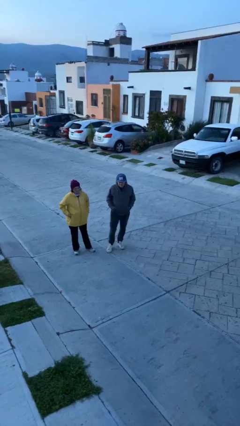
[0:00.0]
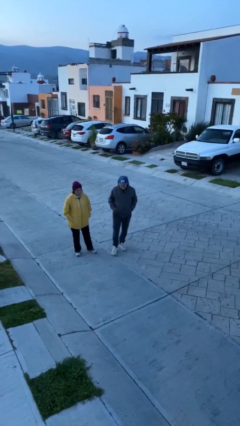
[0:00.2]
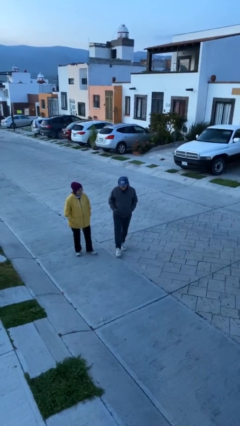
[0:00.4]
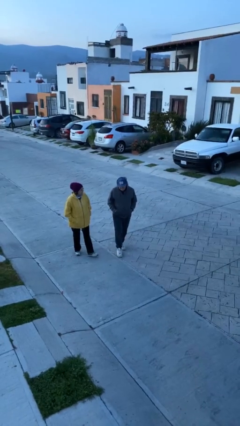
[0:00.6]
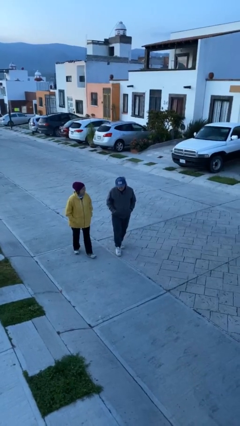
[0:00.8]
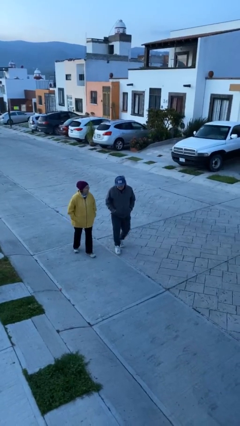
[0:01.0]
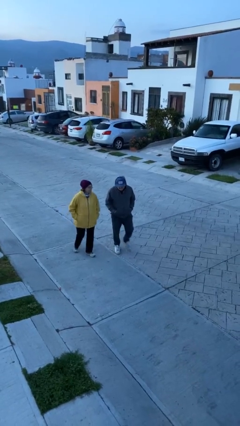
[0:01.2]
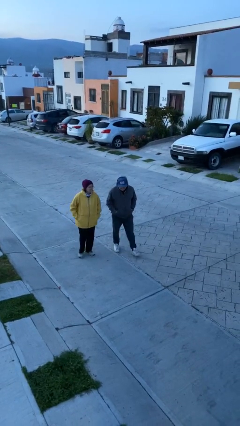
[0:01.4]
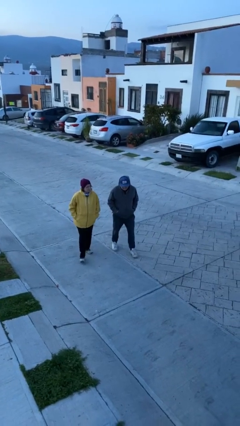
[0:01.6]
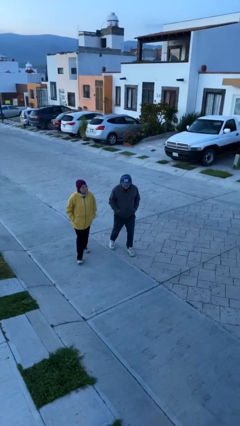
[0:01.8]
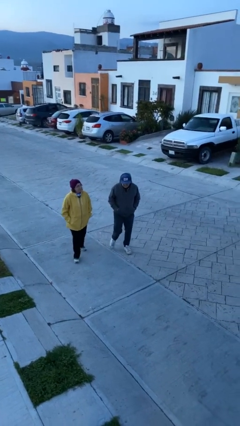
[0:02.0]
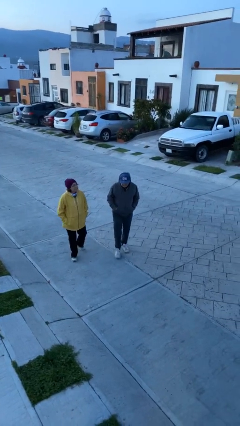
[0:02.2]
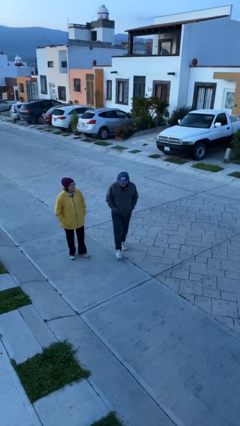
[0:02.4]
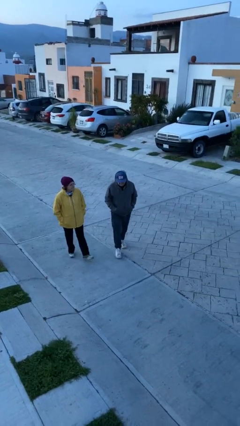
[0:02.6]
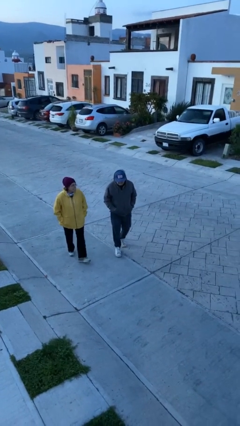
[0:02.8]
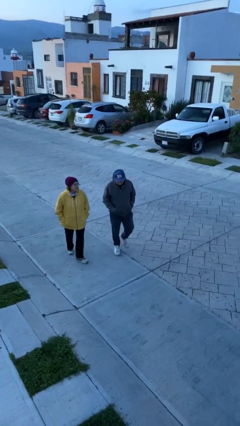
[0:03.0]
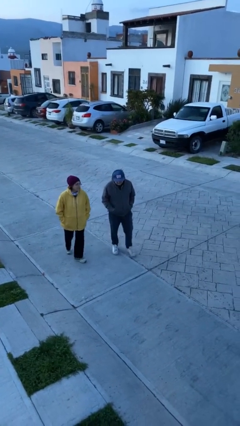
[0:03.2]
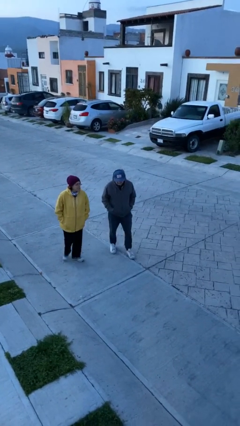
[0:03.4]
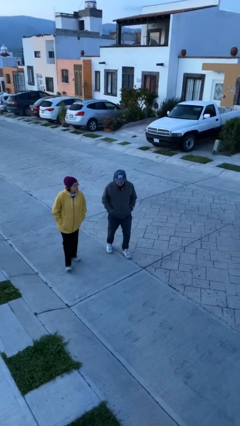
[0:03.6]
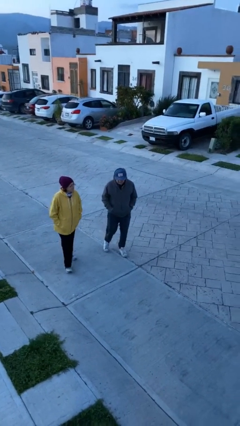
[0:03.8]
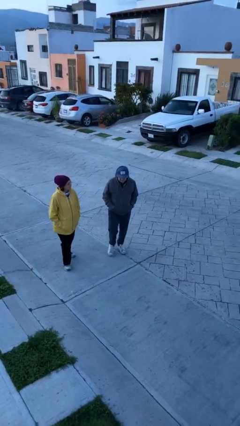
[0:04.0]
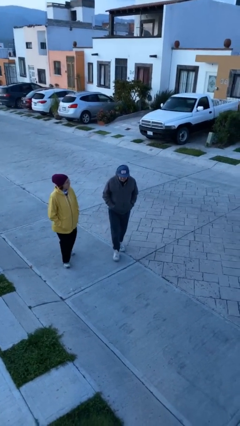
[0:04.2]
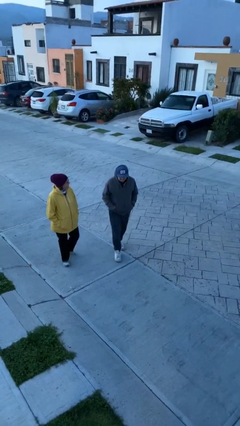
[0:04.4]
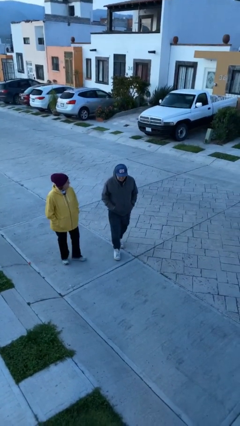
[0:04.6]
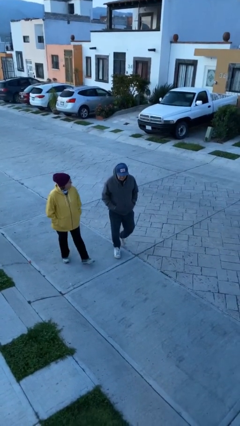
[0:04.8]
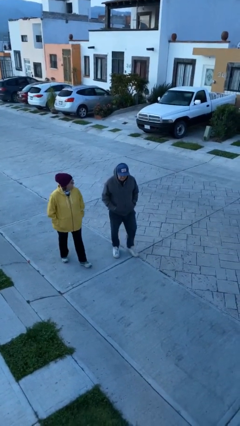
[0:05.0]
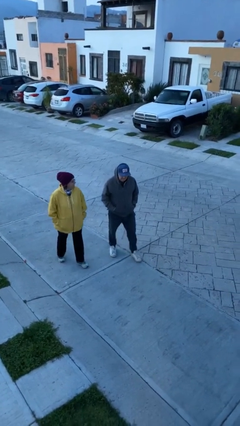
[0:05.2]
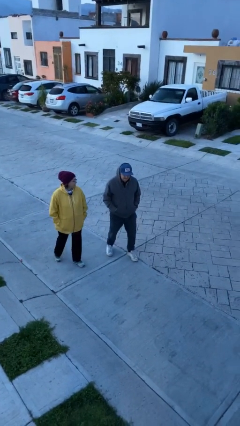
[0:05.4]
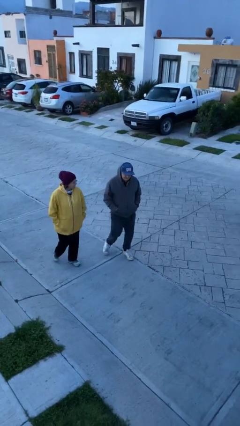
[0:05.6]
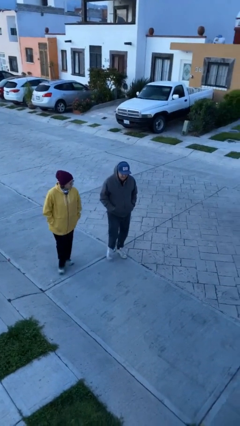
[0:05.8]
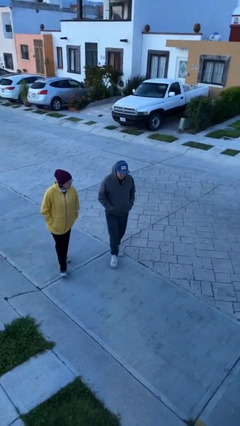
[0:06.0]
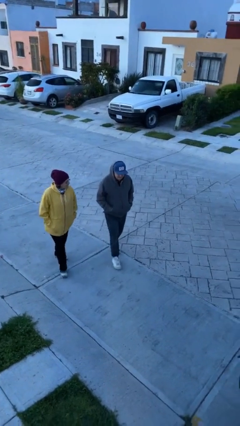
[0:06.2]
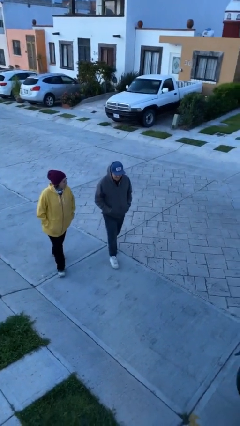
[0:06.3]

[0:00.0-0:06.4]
person talks to person

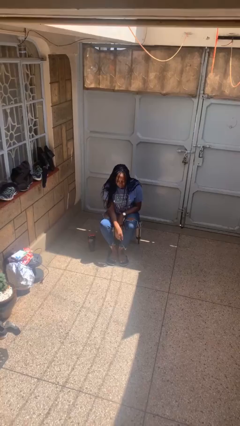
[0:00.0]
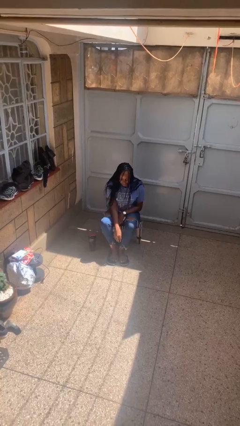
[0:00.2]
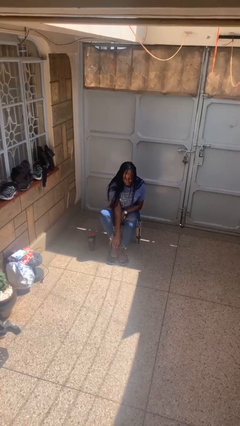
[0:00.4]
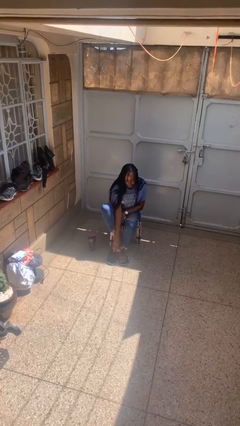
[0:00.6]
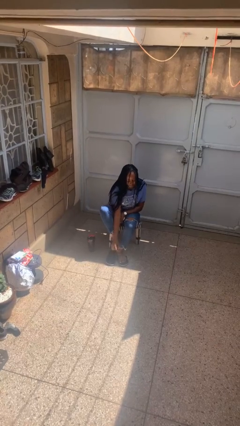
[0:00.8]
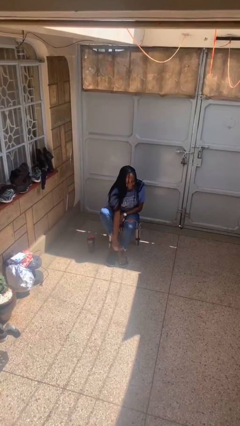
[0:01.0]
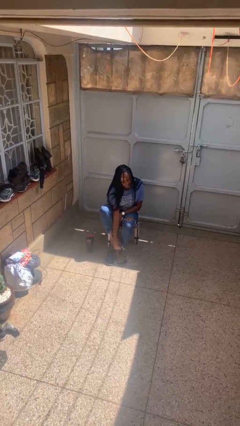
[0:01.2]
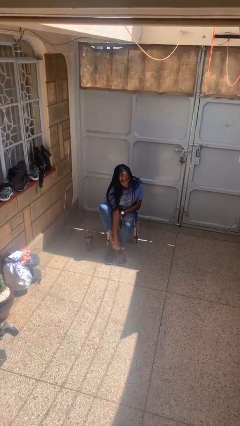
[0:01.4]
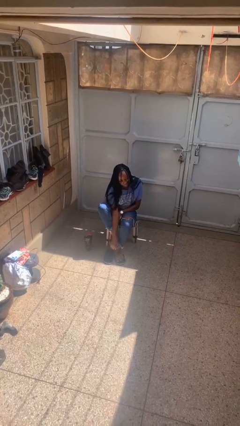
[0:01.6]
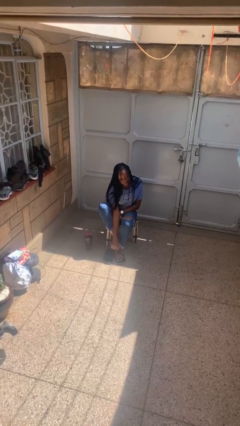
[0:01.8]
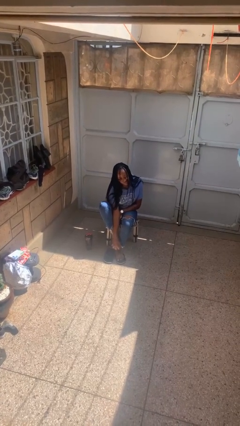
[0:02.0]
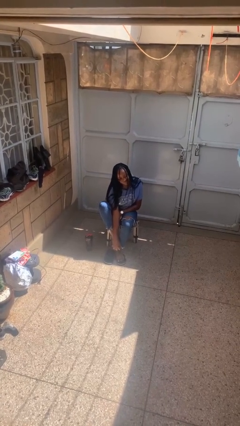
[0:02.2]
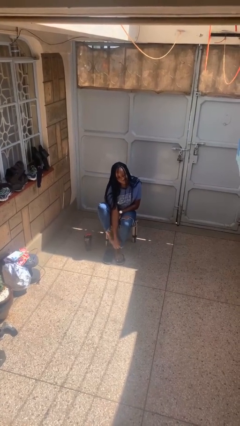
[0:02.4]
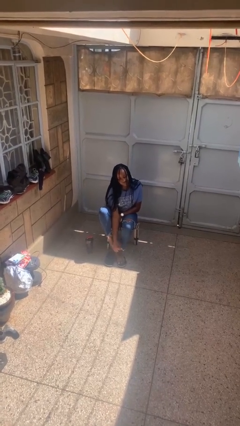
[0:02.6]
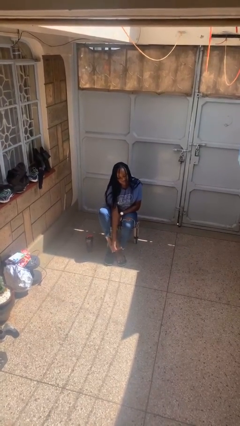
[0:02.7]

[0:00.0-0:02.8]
person rubs foot

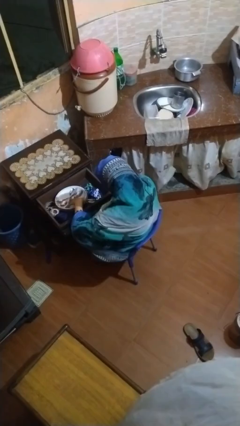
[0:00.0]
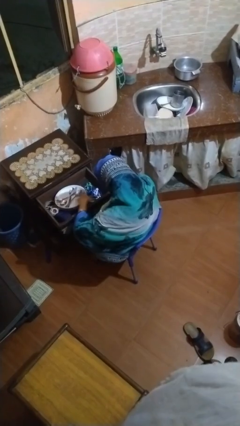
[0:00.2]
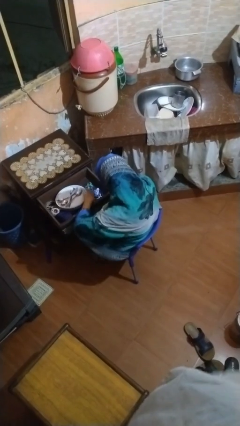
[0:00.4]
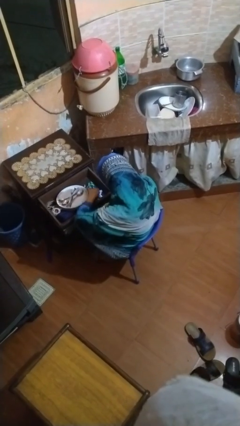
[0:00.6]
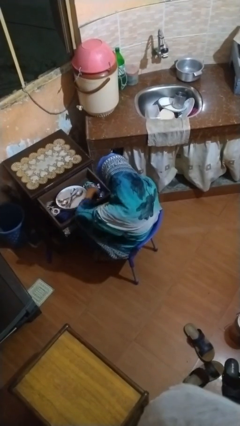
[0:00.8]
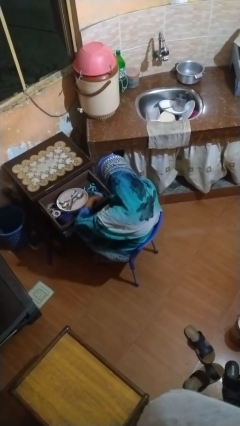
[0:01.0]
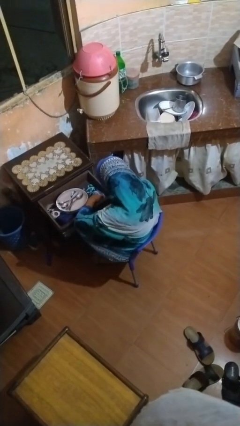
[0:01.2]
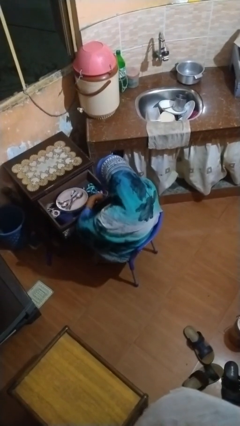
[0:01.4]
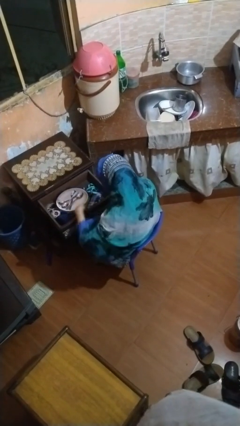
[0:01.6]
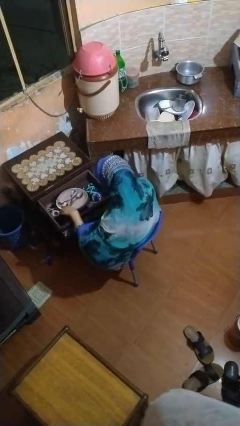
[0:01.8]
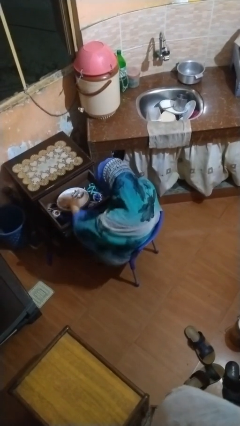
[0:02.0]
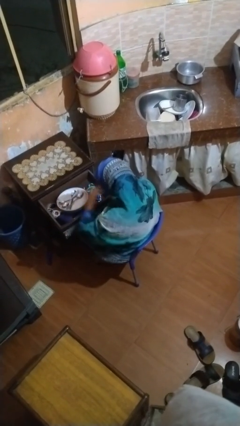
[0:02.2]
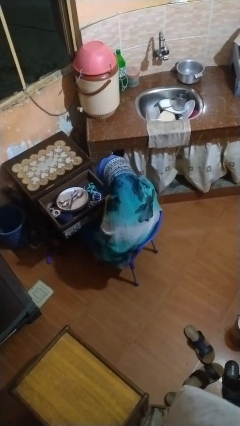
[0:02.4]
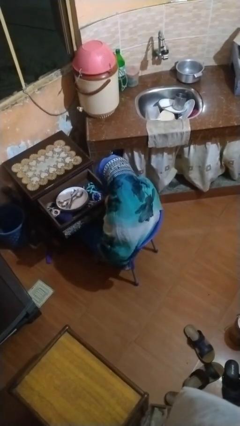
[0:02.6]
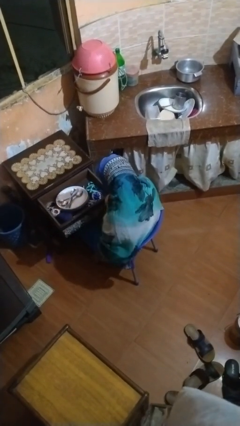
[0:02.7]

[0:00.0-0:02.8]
person searches in kitchen drawer

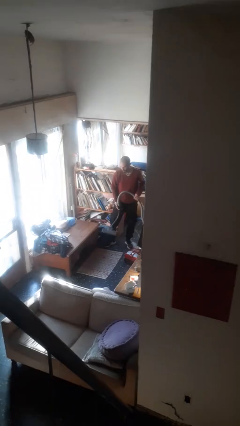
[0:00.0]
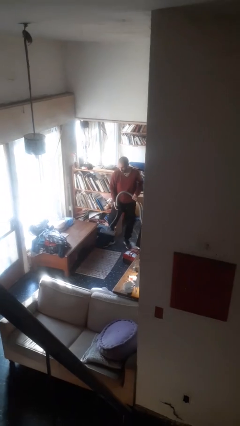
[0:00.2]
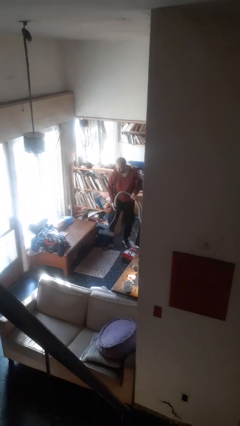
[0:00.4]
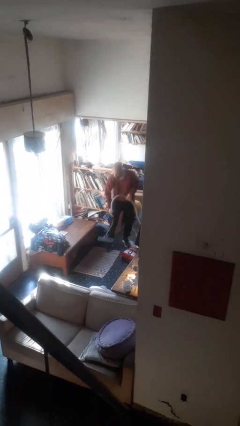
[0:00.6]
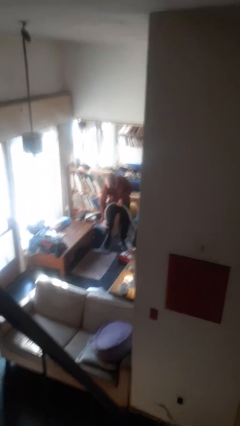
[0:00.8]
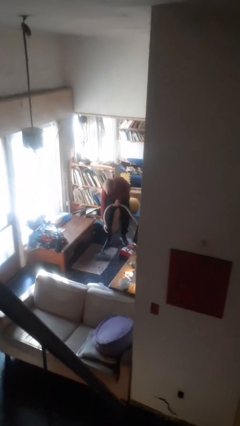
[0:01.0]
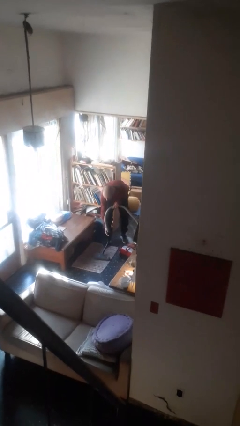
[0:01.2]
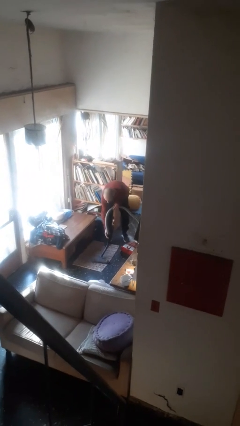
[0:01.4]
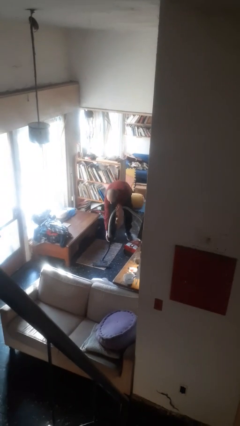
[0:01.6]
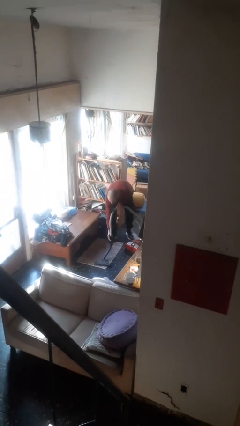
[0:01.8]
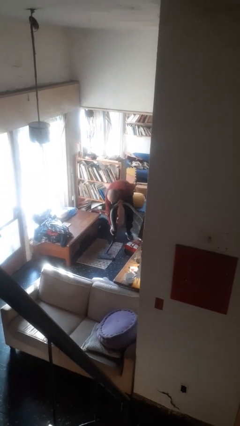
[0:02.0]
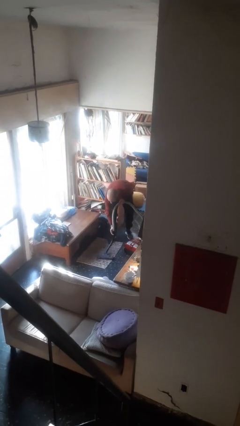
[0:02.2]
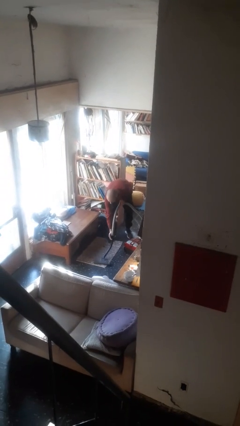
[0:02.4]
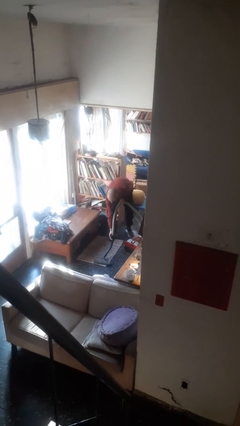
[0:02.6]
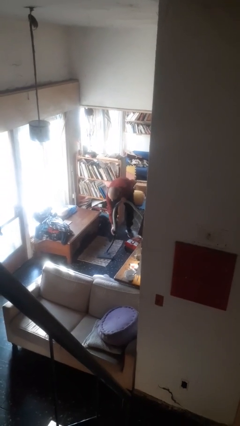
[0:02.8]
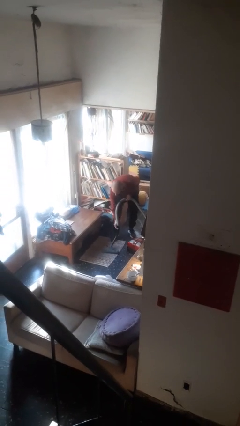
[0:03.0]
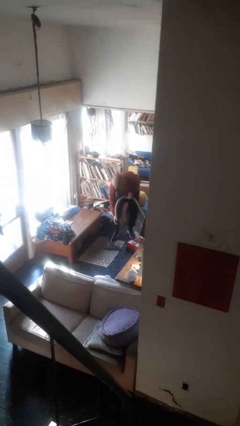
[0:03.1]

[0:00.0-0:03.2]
person vacuums carpet

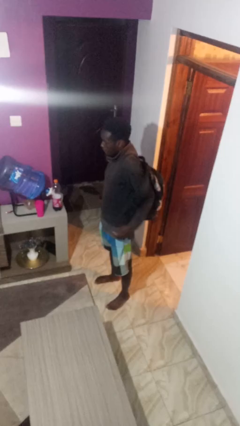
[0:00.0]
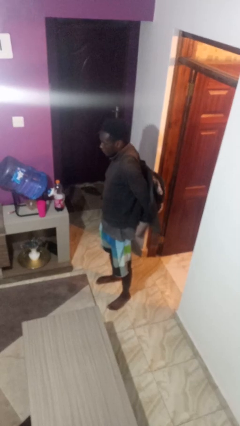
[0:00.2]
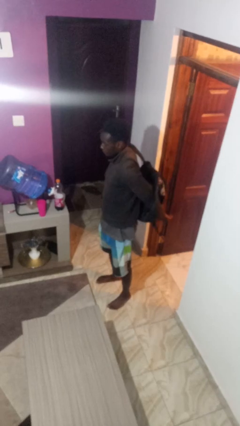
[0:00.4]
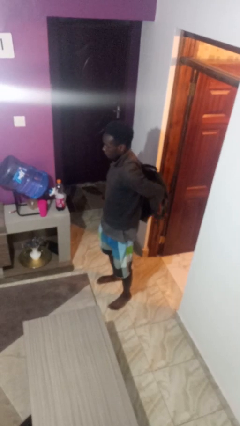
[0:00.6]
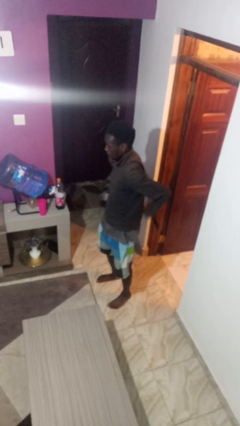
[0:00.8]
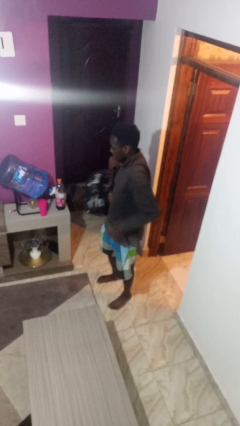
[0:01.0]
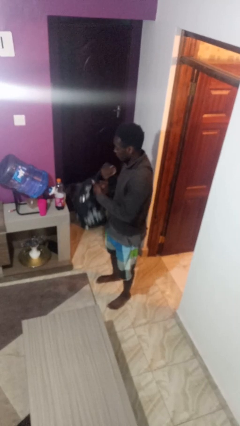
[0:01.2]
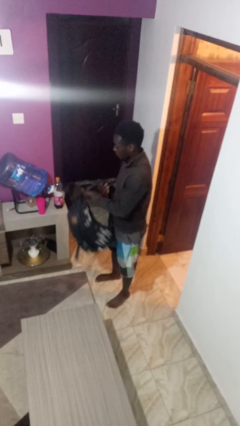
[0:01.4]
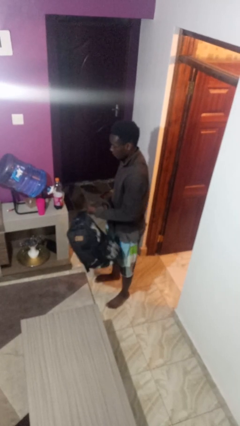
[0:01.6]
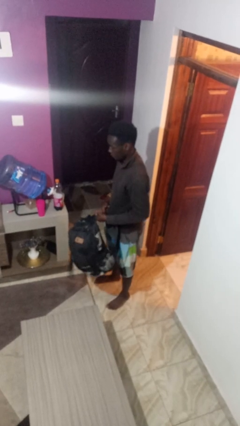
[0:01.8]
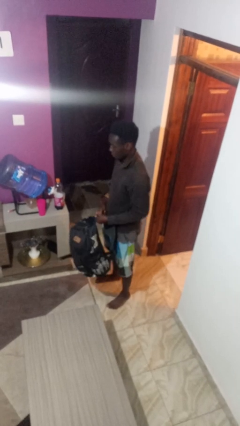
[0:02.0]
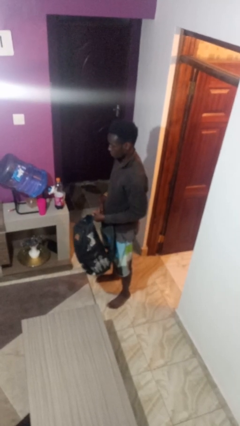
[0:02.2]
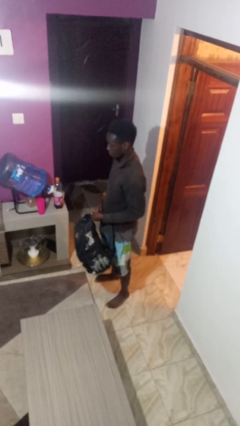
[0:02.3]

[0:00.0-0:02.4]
person takes off backpack
